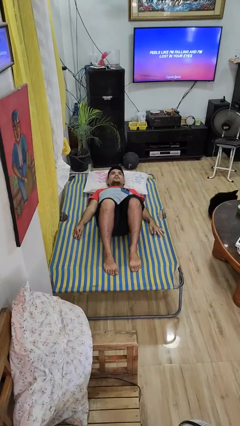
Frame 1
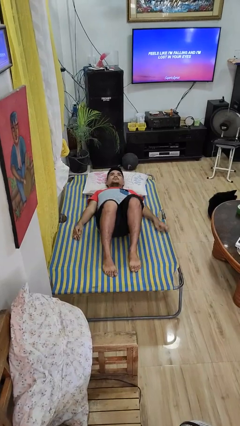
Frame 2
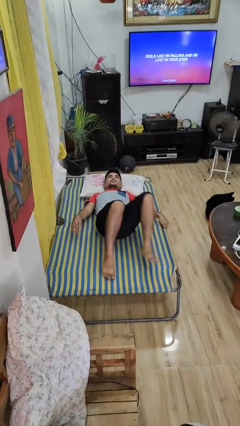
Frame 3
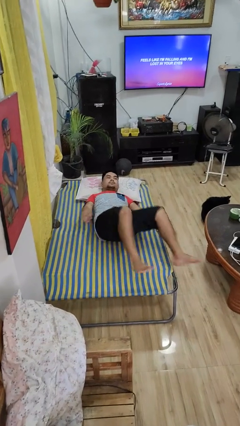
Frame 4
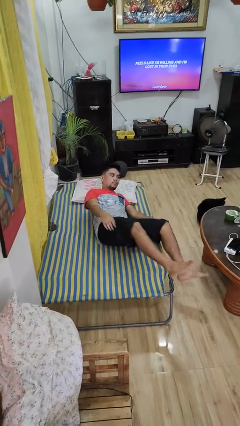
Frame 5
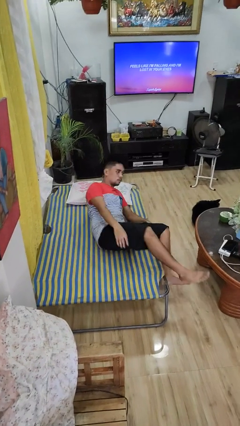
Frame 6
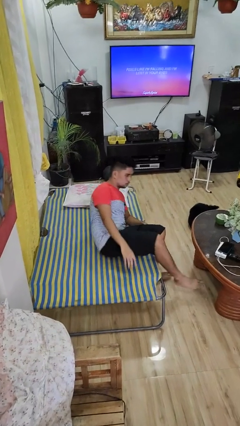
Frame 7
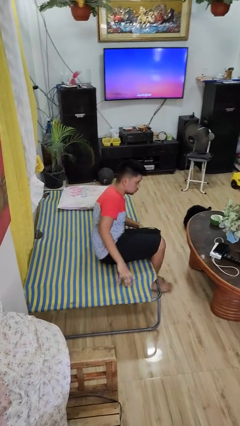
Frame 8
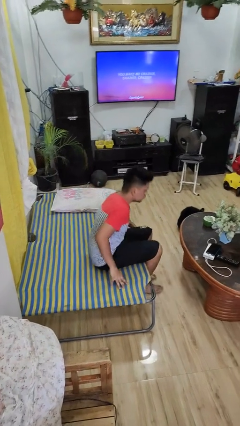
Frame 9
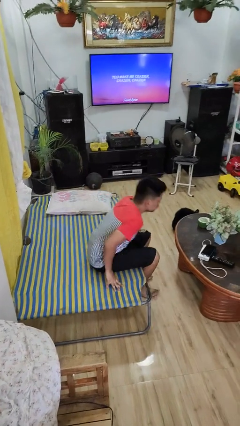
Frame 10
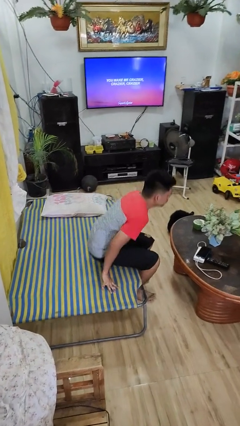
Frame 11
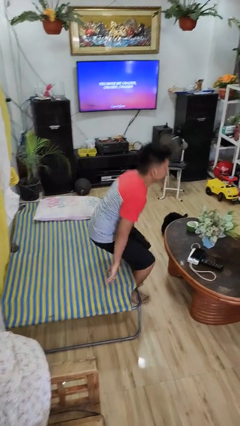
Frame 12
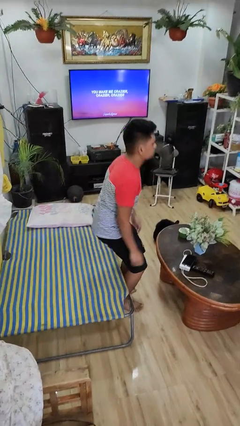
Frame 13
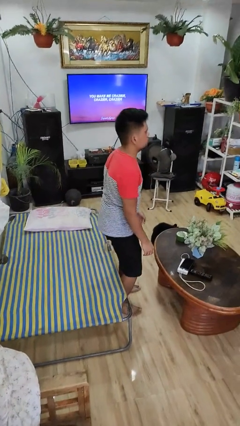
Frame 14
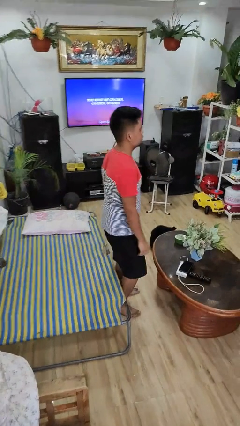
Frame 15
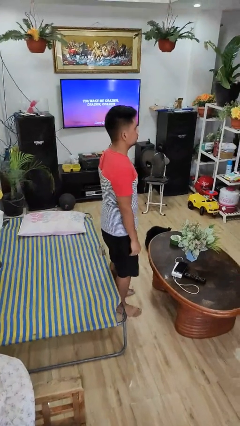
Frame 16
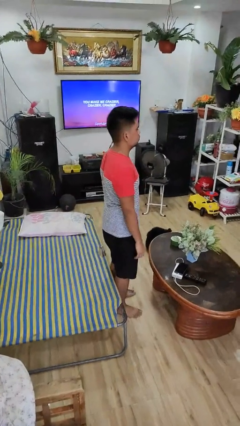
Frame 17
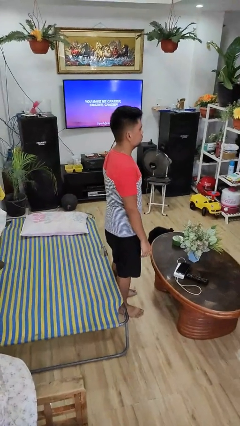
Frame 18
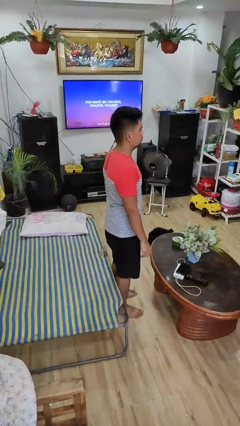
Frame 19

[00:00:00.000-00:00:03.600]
person stands up

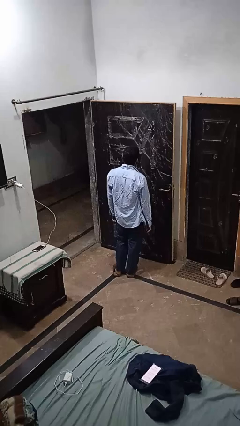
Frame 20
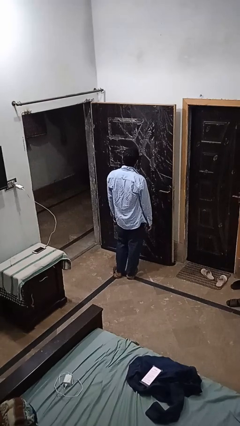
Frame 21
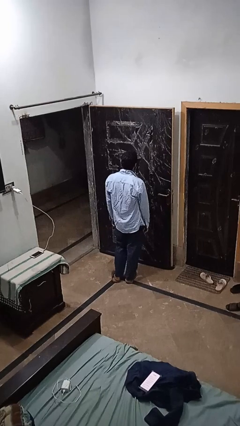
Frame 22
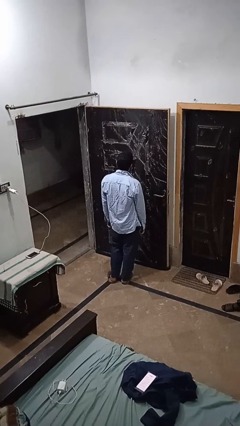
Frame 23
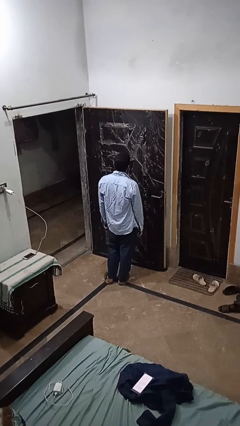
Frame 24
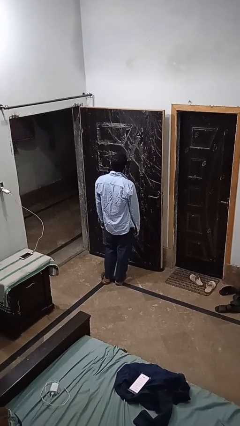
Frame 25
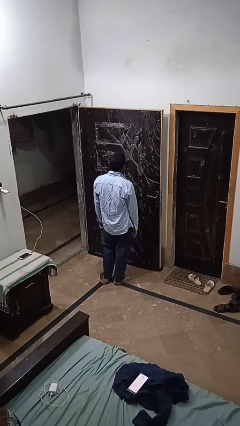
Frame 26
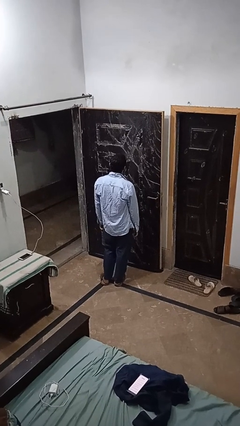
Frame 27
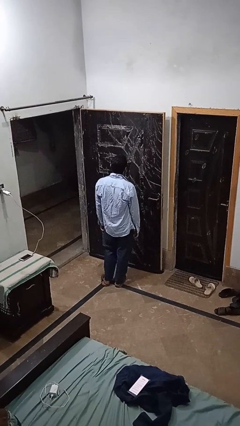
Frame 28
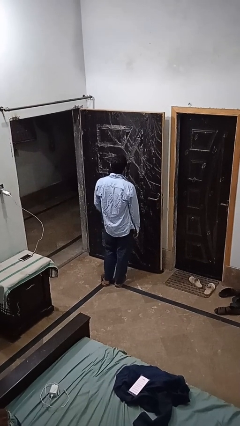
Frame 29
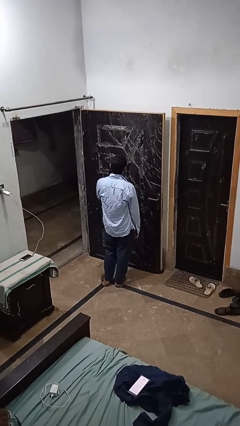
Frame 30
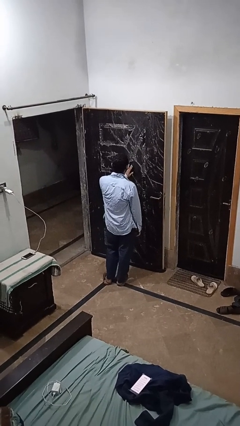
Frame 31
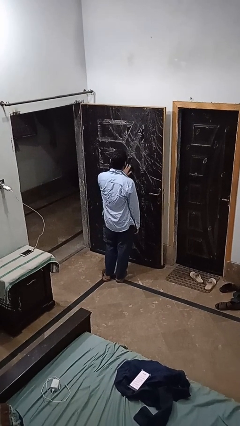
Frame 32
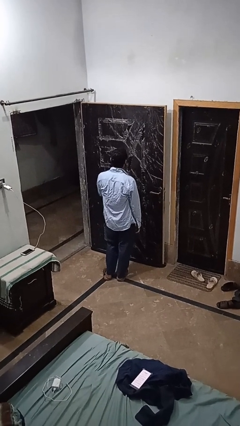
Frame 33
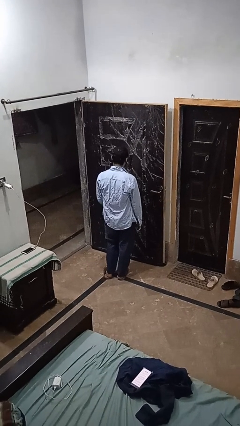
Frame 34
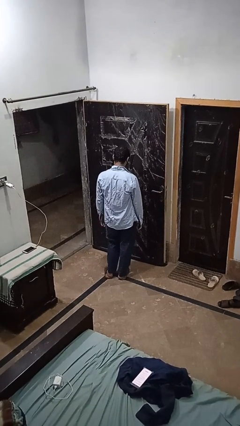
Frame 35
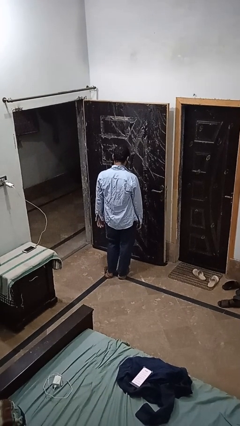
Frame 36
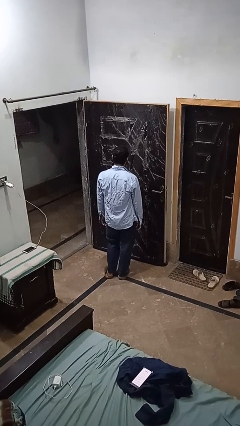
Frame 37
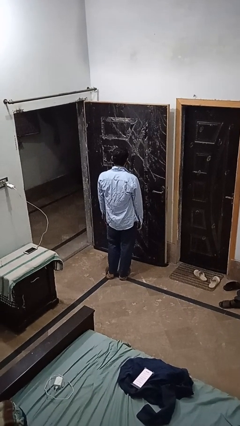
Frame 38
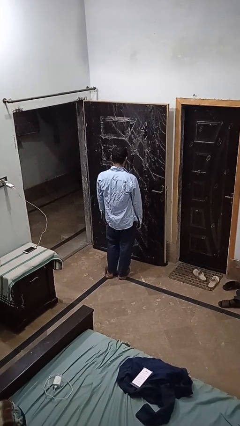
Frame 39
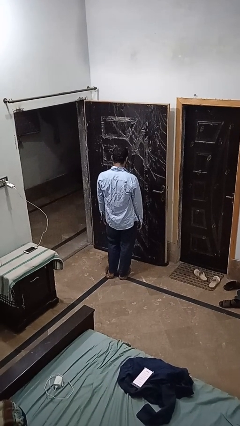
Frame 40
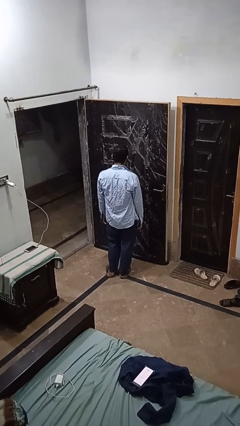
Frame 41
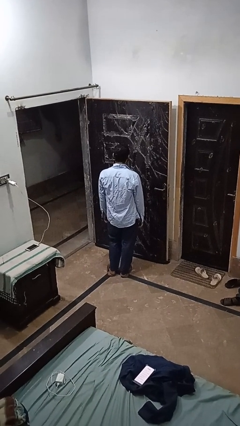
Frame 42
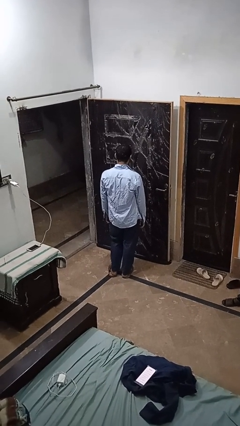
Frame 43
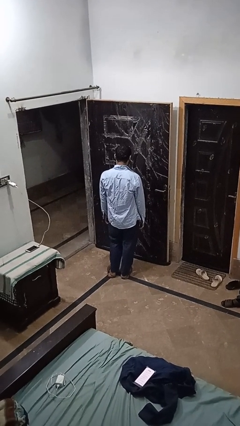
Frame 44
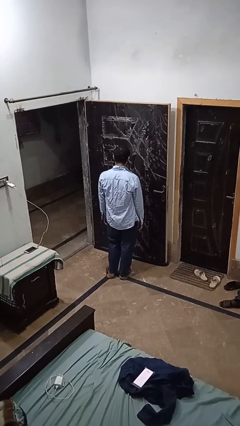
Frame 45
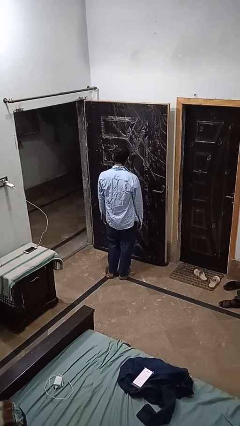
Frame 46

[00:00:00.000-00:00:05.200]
person nods head

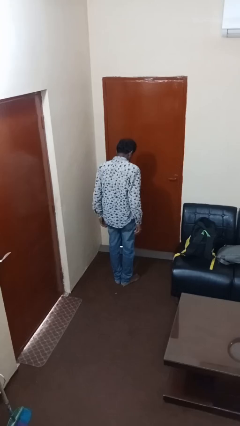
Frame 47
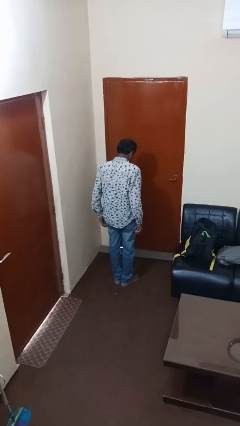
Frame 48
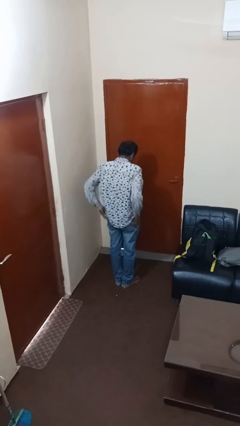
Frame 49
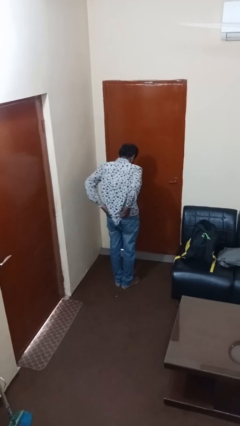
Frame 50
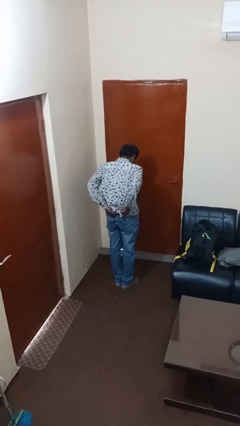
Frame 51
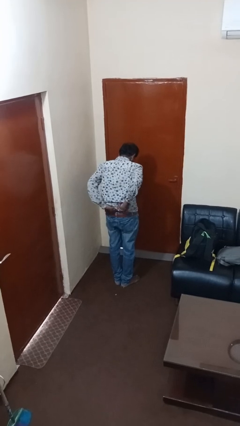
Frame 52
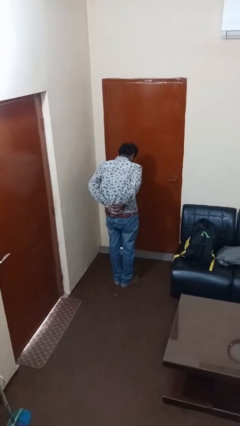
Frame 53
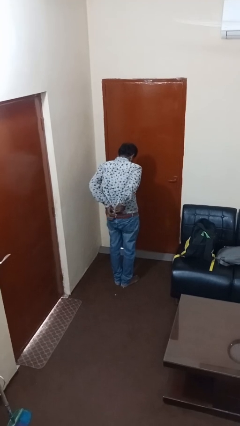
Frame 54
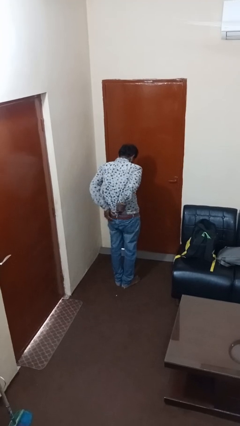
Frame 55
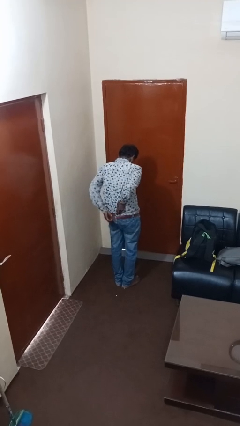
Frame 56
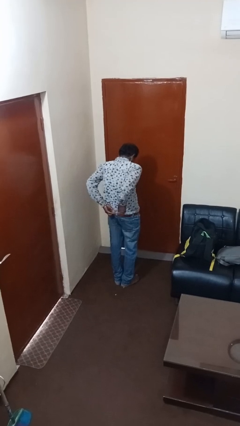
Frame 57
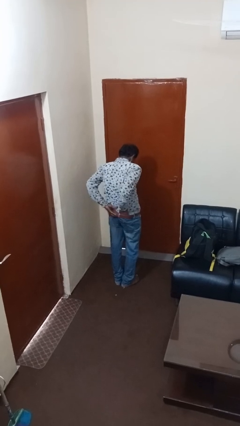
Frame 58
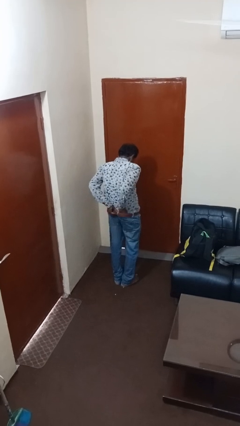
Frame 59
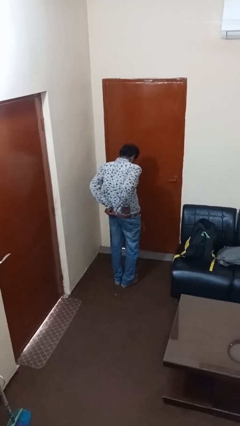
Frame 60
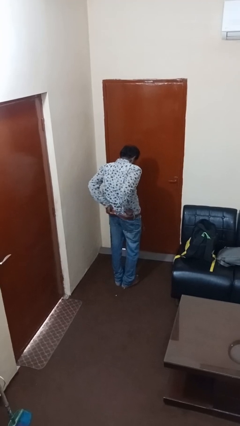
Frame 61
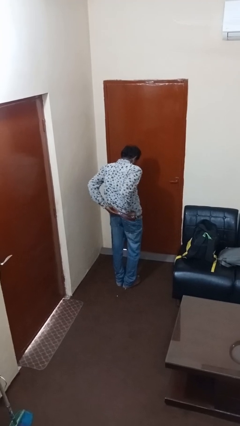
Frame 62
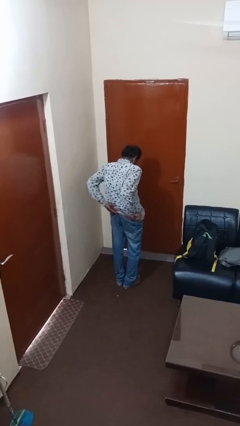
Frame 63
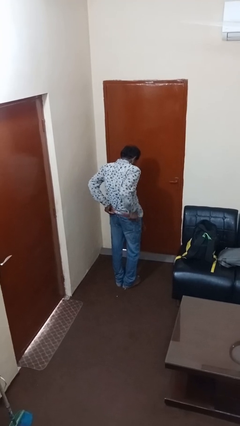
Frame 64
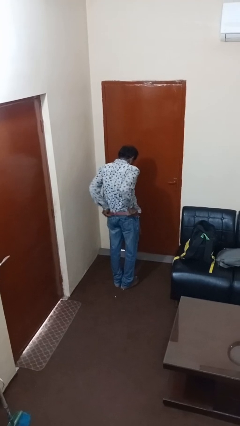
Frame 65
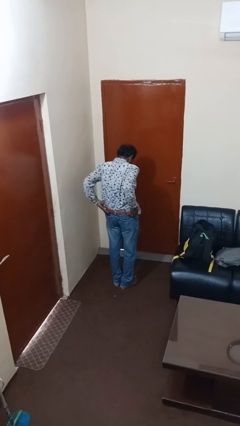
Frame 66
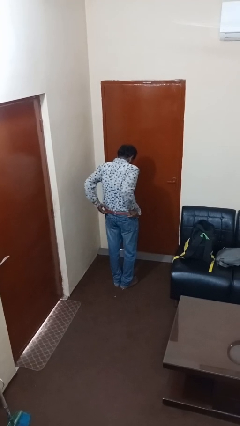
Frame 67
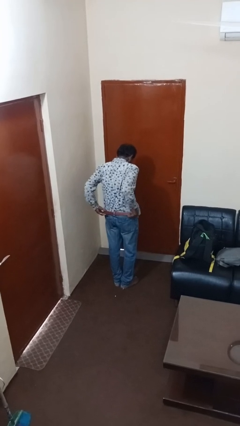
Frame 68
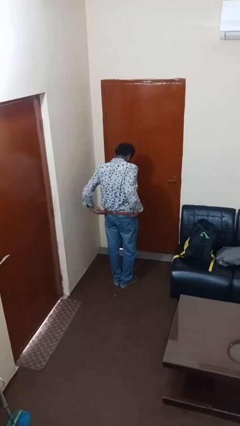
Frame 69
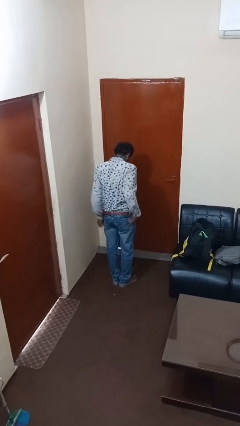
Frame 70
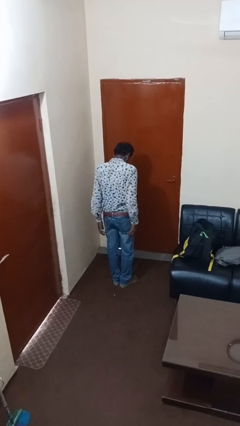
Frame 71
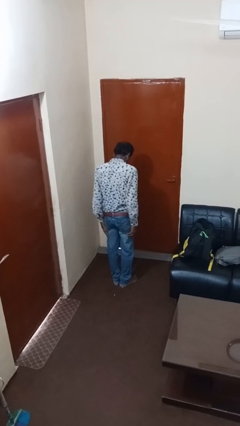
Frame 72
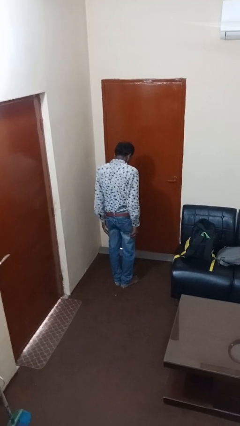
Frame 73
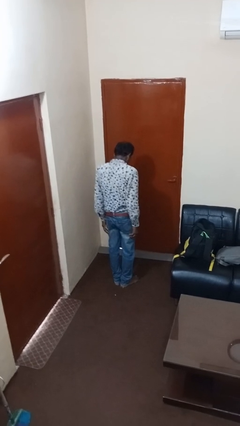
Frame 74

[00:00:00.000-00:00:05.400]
person tucks in shirt

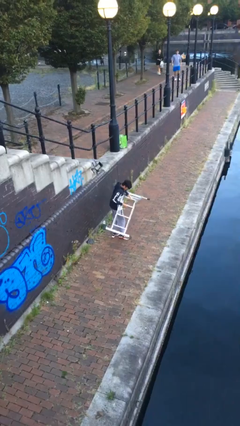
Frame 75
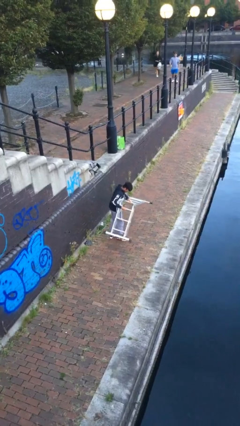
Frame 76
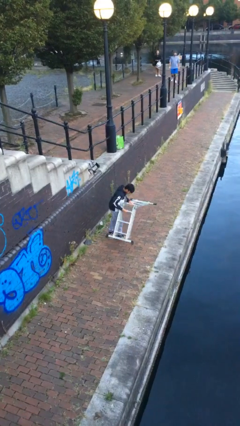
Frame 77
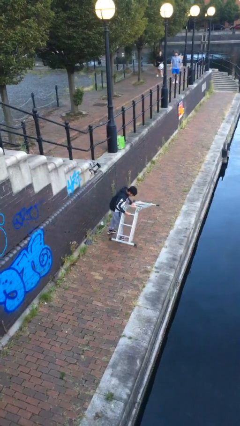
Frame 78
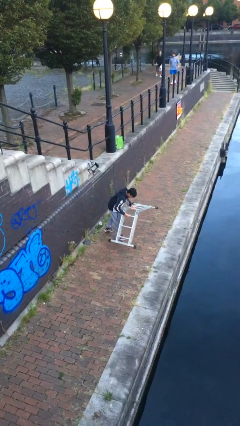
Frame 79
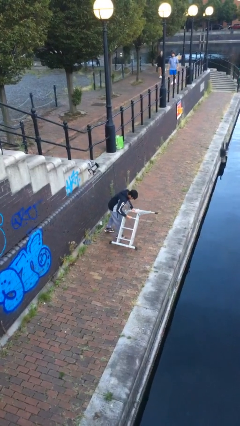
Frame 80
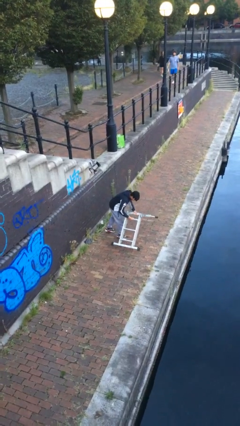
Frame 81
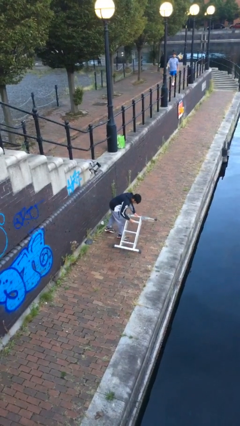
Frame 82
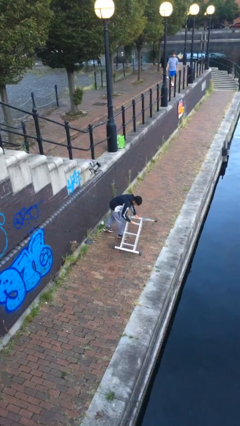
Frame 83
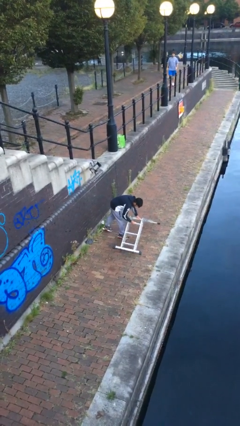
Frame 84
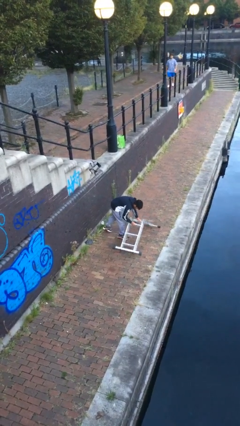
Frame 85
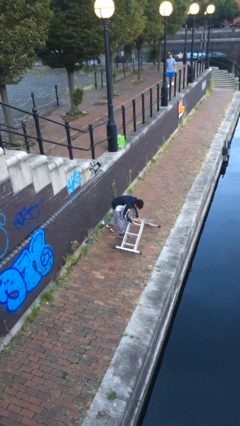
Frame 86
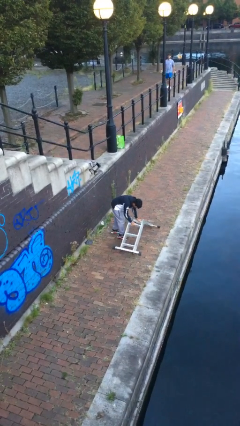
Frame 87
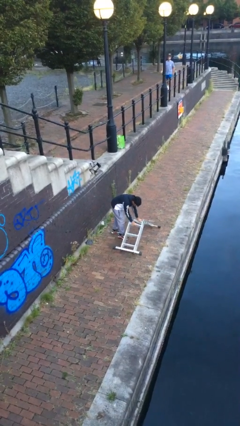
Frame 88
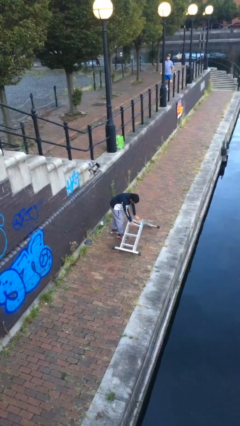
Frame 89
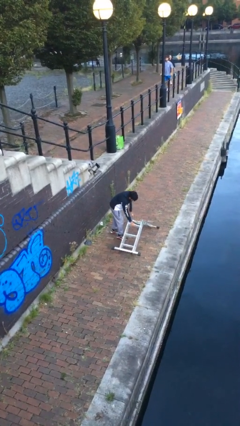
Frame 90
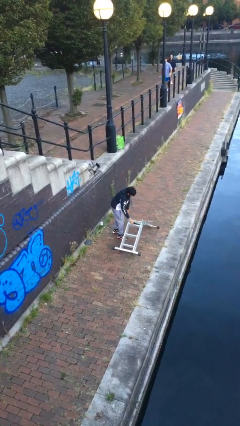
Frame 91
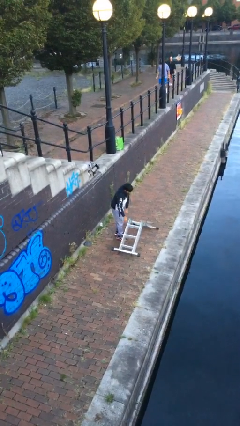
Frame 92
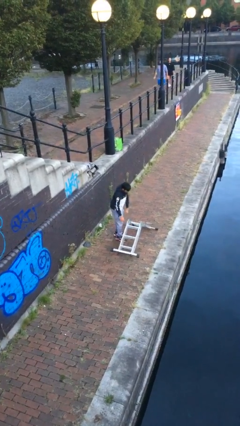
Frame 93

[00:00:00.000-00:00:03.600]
person puts down object on floor
